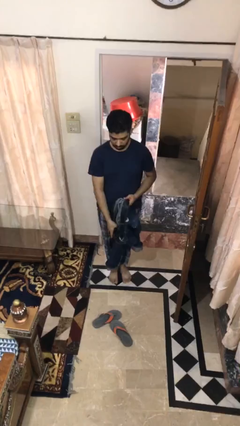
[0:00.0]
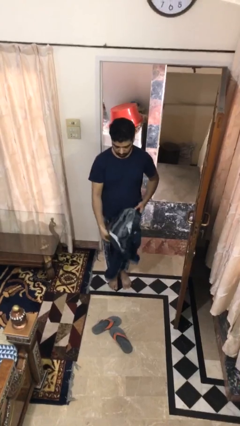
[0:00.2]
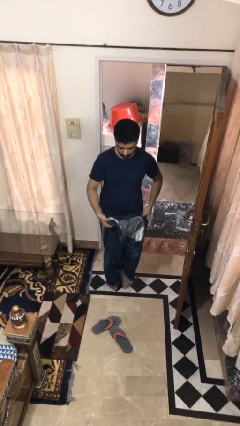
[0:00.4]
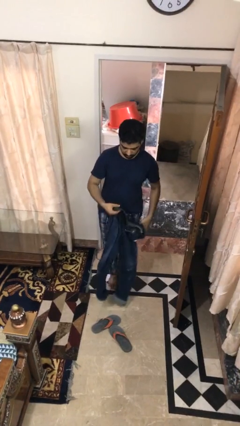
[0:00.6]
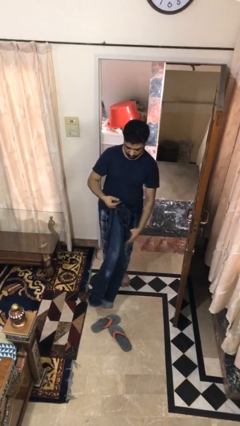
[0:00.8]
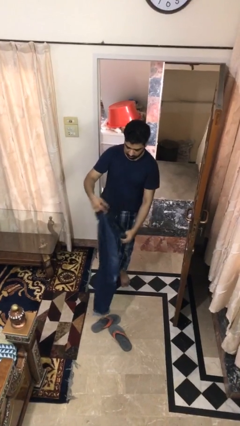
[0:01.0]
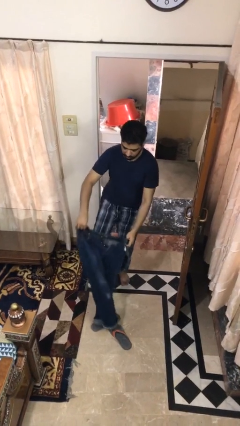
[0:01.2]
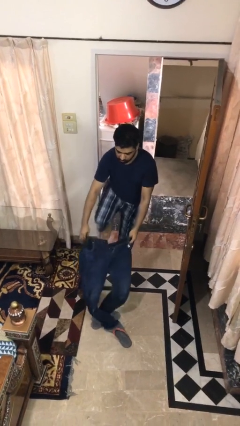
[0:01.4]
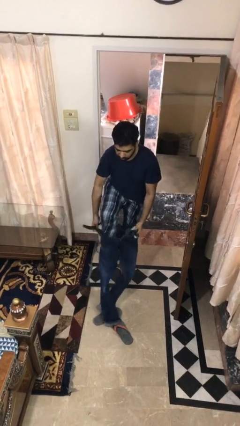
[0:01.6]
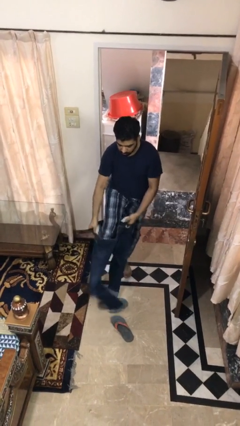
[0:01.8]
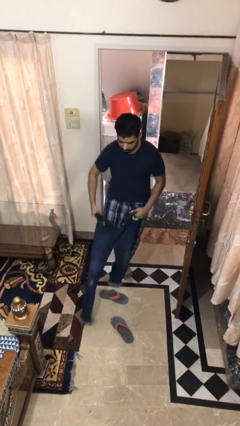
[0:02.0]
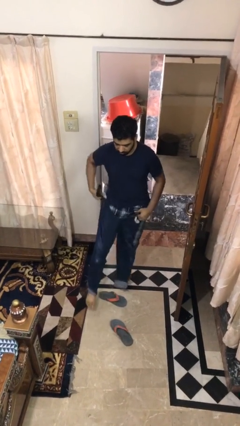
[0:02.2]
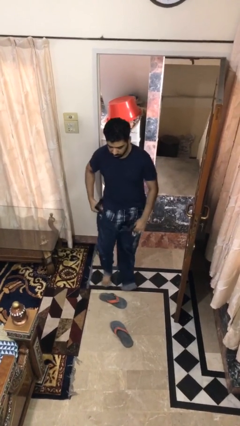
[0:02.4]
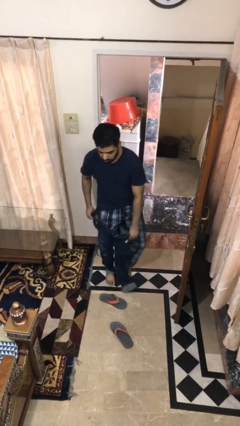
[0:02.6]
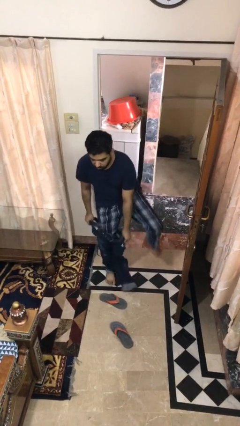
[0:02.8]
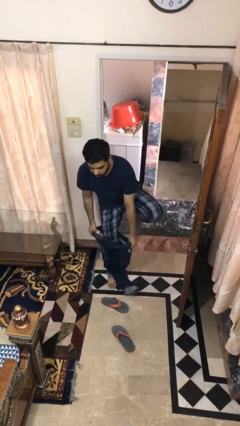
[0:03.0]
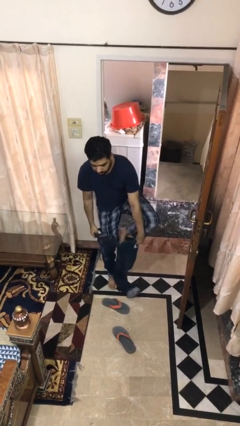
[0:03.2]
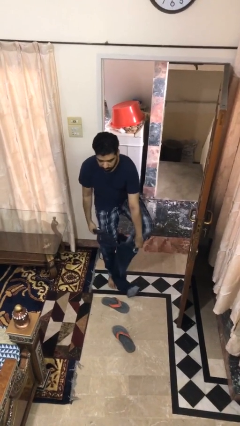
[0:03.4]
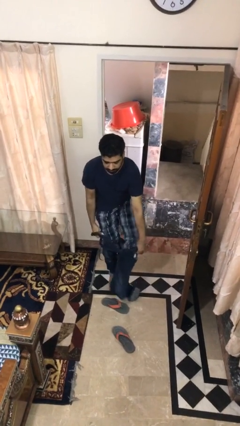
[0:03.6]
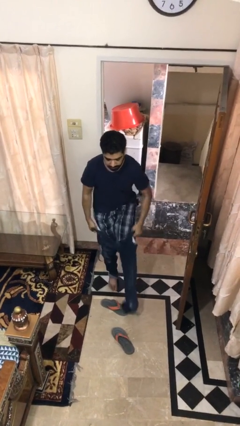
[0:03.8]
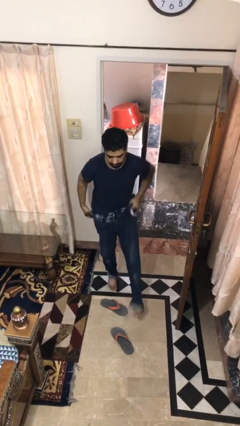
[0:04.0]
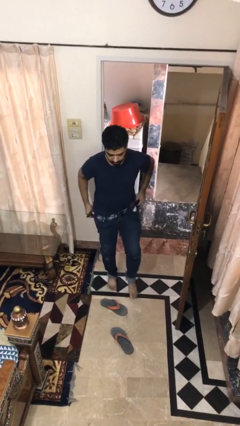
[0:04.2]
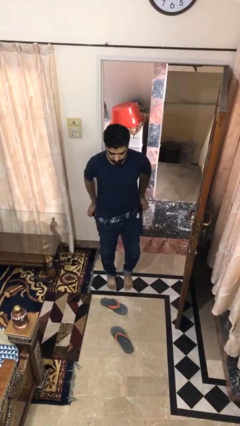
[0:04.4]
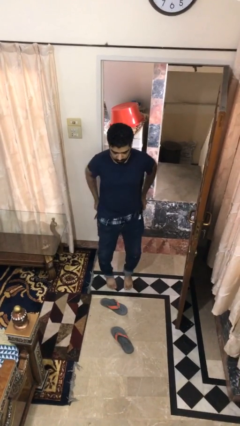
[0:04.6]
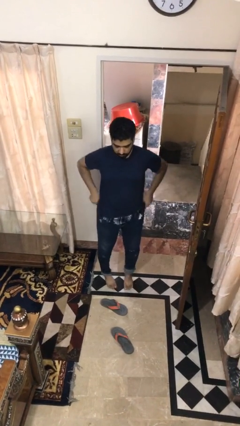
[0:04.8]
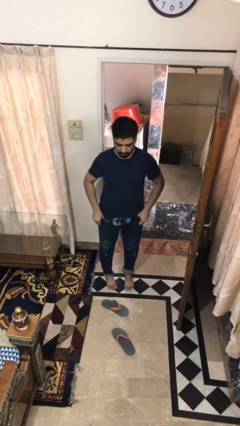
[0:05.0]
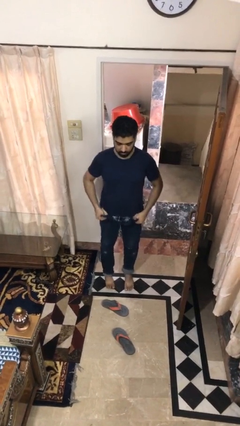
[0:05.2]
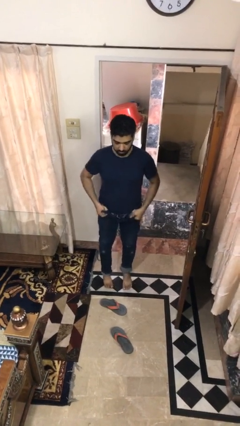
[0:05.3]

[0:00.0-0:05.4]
person puts on pants

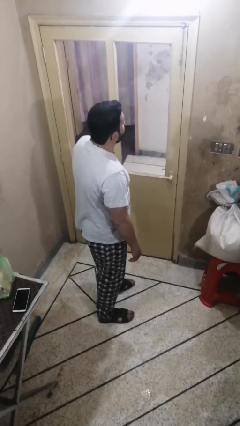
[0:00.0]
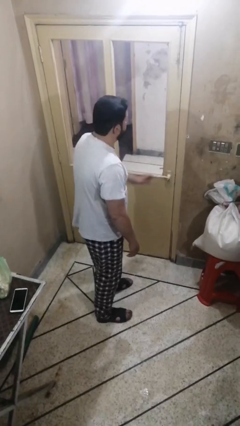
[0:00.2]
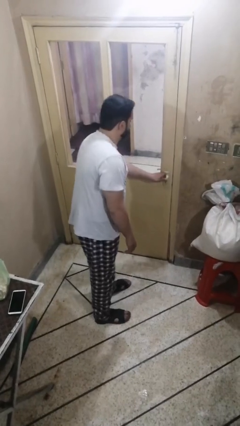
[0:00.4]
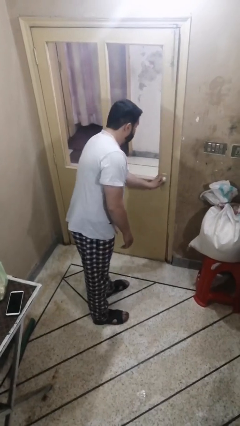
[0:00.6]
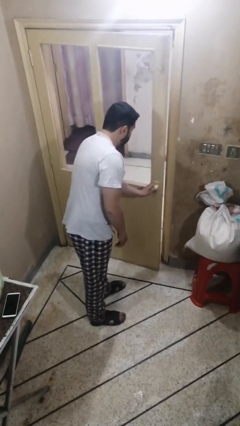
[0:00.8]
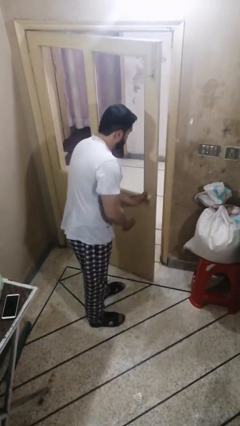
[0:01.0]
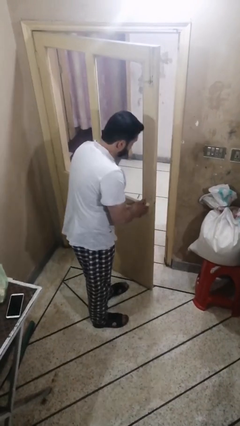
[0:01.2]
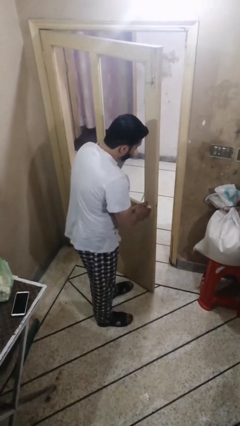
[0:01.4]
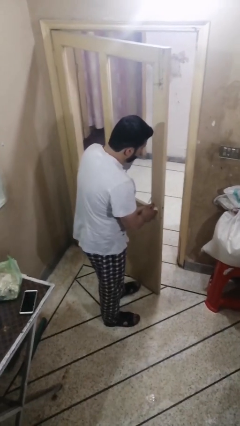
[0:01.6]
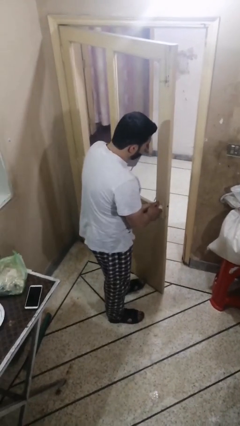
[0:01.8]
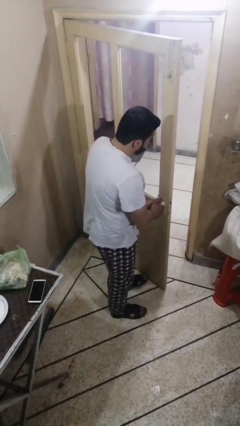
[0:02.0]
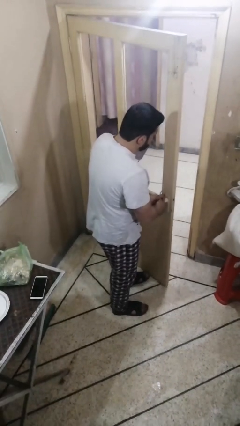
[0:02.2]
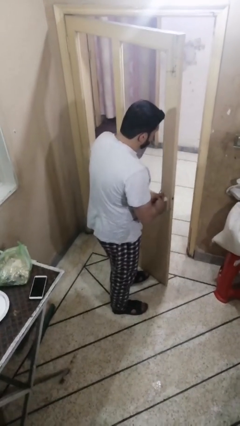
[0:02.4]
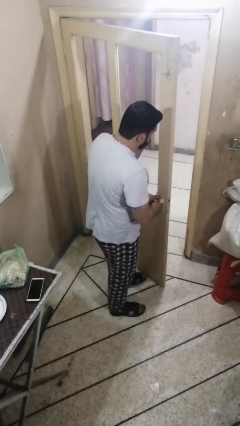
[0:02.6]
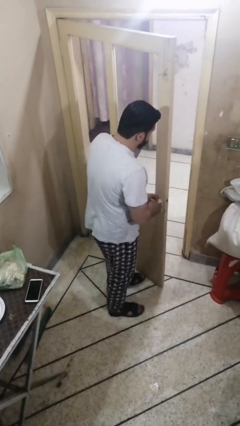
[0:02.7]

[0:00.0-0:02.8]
person opens facility door

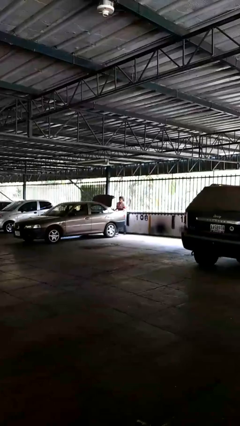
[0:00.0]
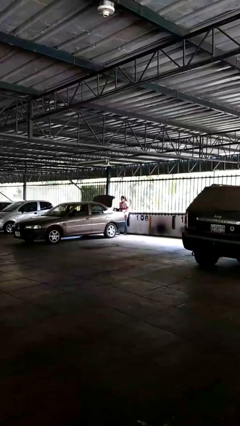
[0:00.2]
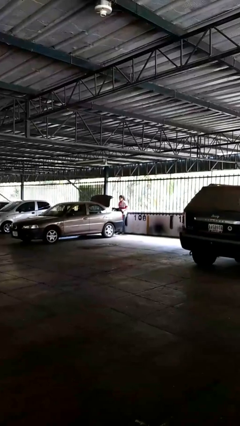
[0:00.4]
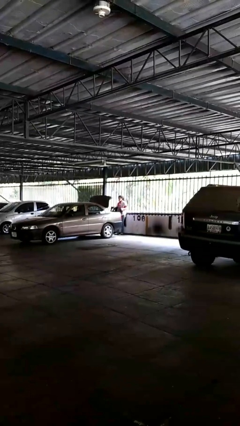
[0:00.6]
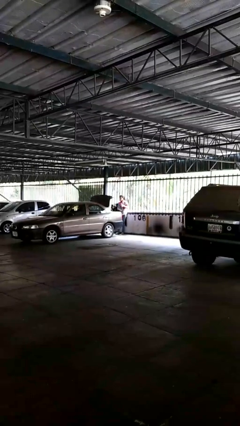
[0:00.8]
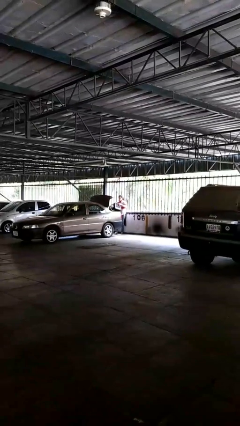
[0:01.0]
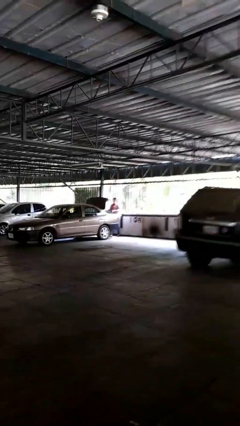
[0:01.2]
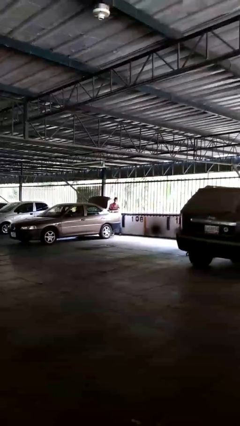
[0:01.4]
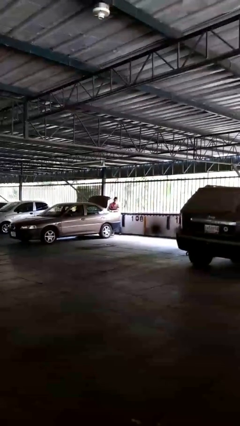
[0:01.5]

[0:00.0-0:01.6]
person unloads car

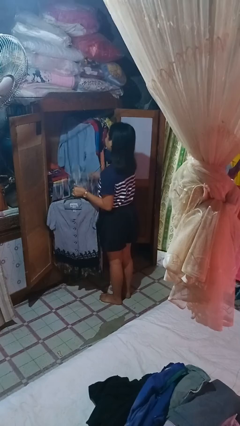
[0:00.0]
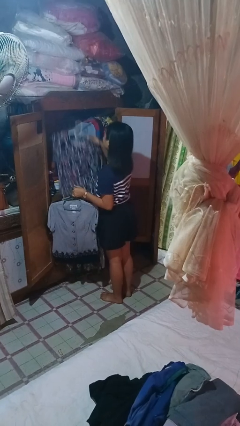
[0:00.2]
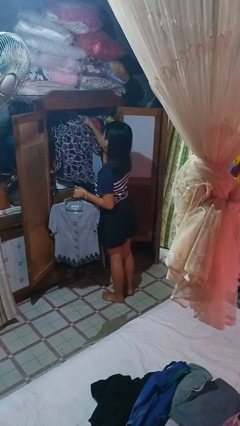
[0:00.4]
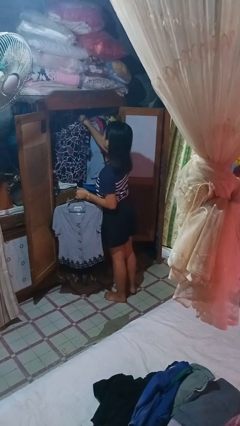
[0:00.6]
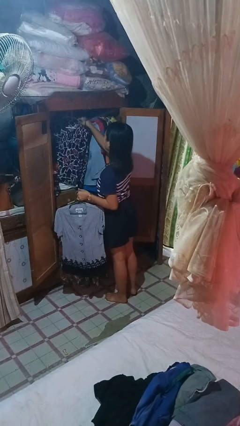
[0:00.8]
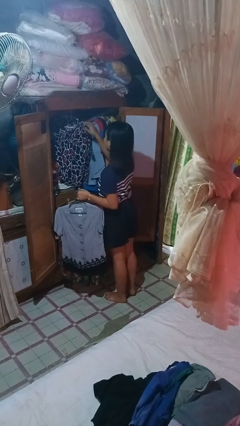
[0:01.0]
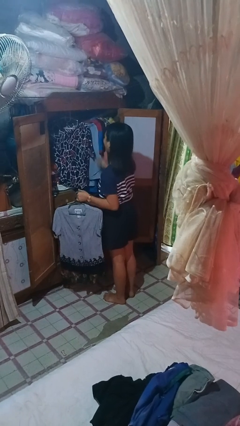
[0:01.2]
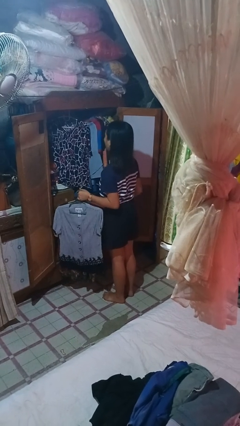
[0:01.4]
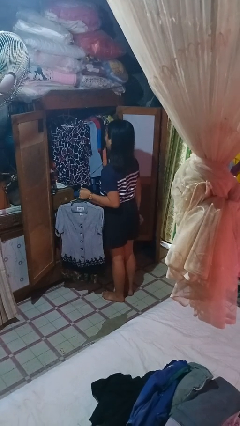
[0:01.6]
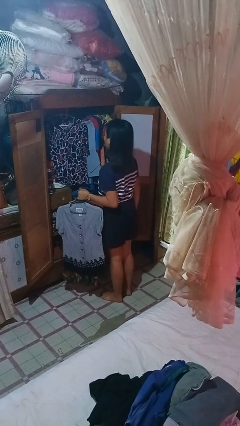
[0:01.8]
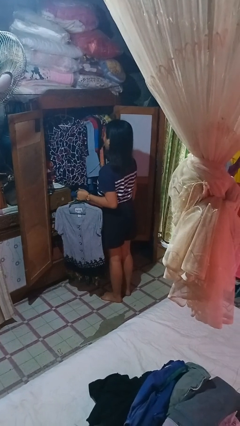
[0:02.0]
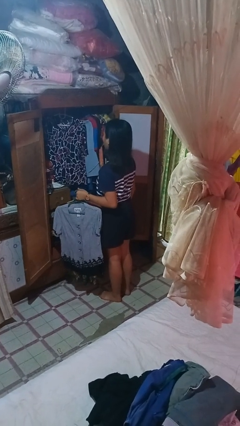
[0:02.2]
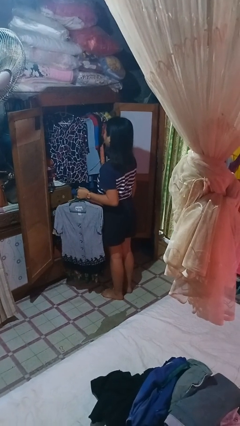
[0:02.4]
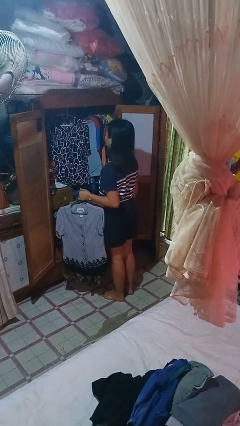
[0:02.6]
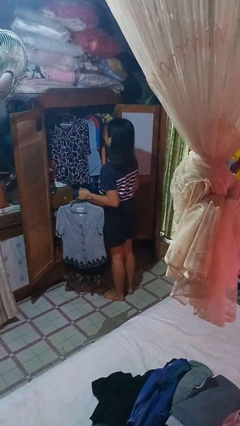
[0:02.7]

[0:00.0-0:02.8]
person puts clothes into closet

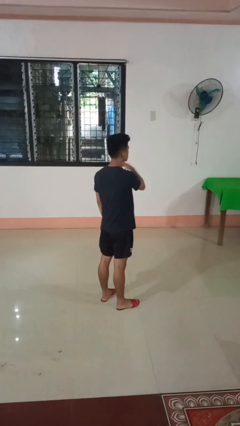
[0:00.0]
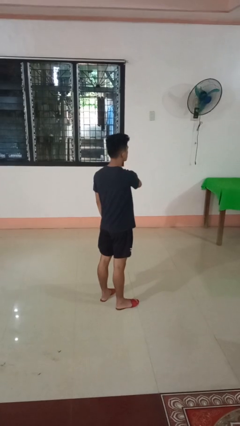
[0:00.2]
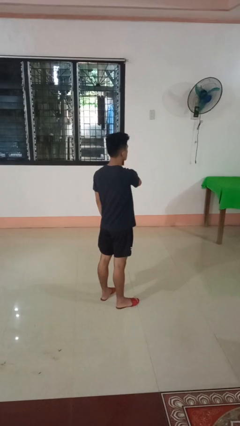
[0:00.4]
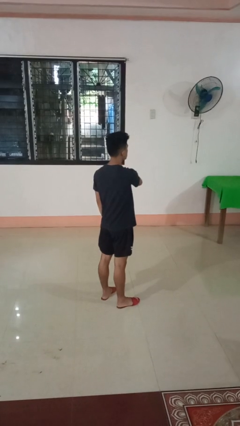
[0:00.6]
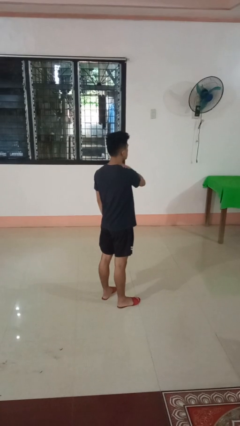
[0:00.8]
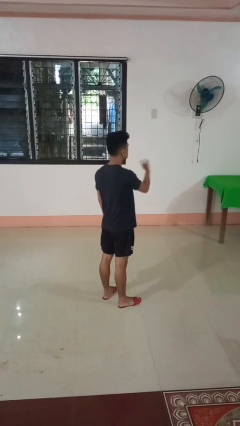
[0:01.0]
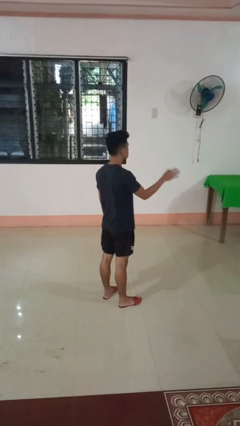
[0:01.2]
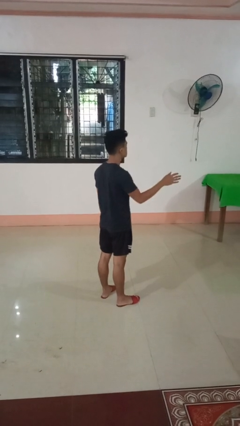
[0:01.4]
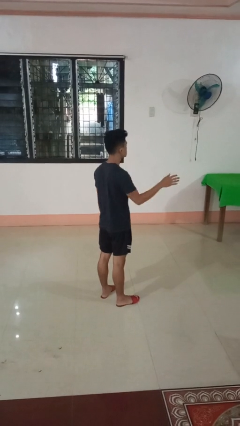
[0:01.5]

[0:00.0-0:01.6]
person gestures swipe left

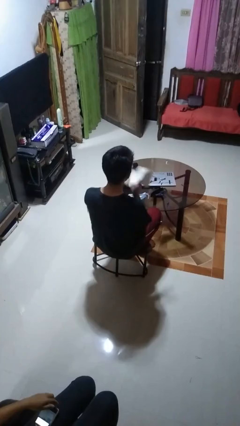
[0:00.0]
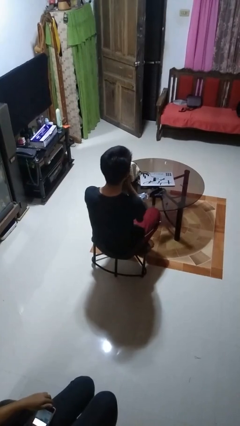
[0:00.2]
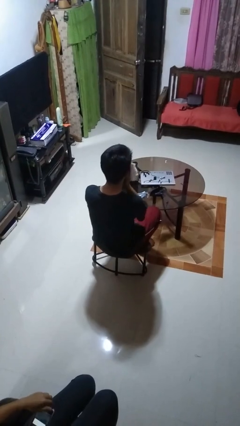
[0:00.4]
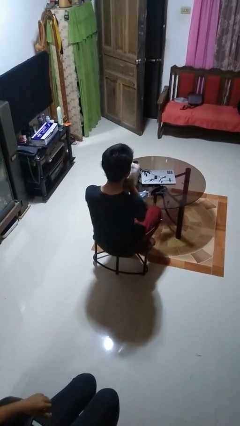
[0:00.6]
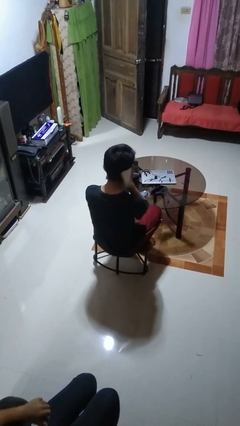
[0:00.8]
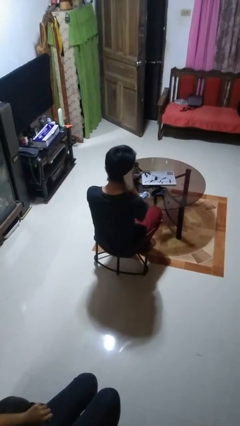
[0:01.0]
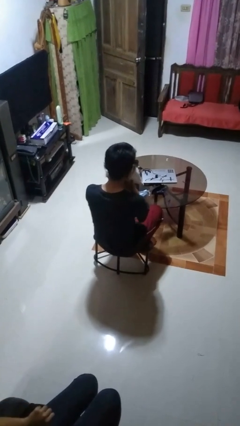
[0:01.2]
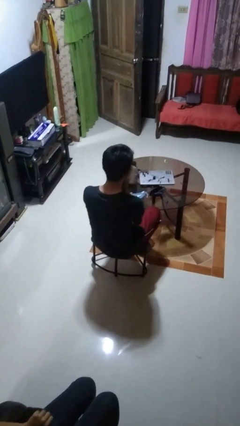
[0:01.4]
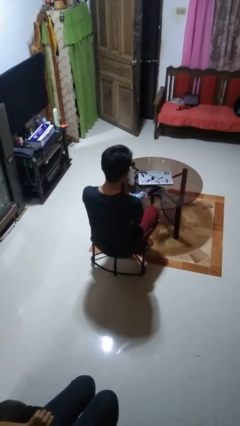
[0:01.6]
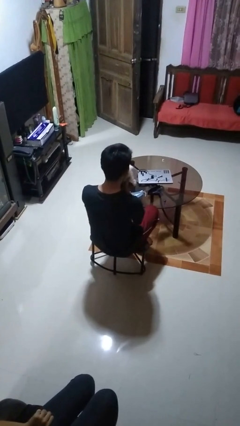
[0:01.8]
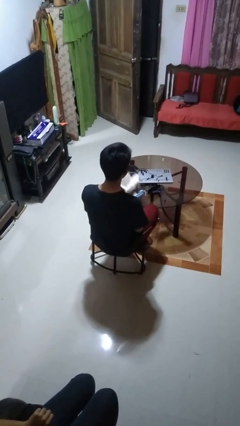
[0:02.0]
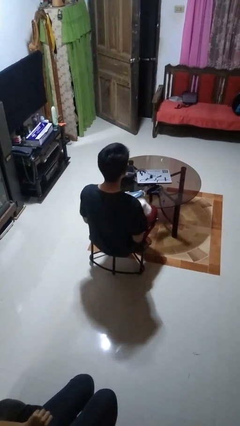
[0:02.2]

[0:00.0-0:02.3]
person wipes mouth with napkin

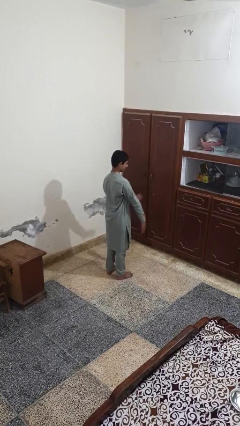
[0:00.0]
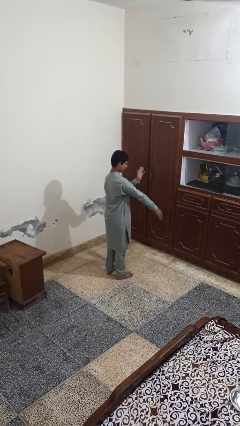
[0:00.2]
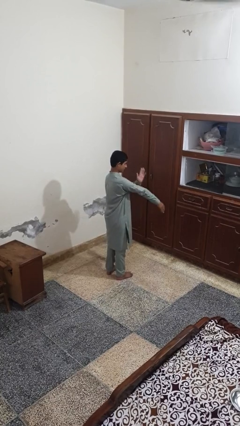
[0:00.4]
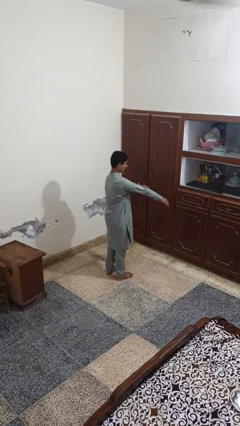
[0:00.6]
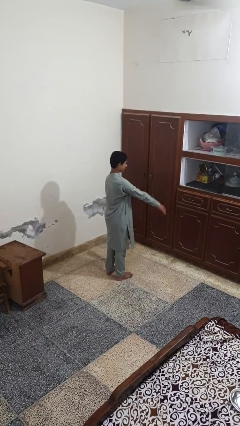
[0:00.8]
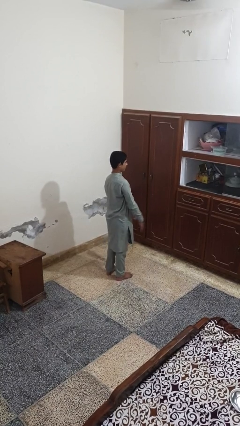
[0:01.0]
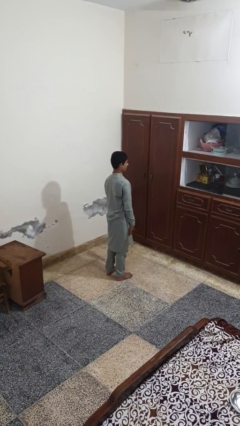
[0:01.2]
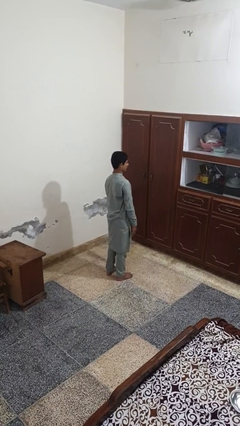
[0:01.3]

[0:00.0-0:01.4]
person swats bug
